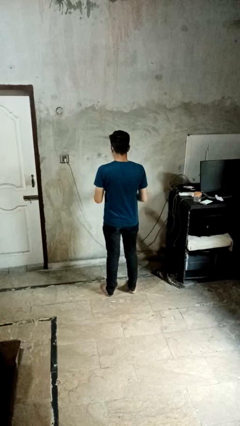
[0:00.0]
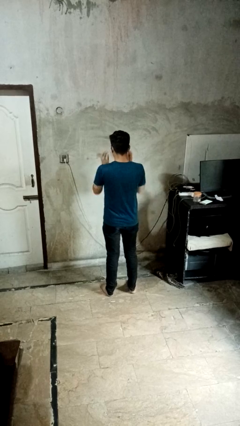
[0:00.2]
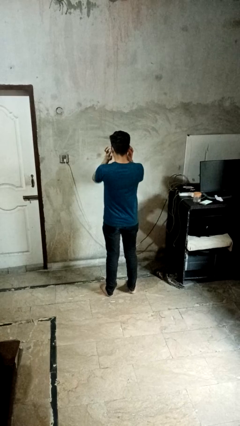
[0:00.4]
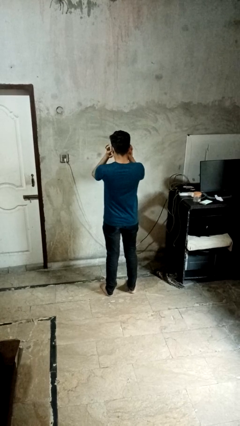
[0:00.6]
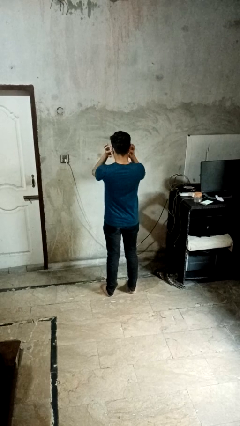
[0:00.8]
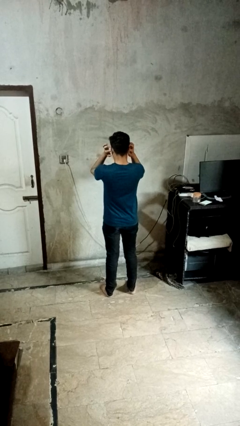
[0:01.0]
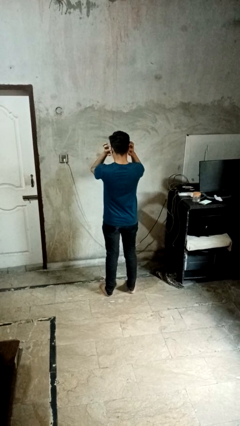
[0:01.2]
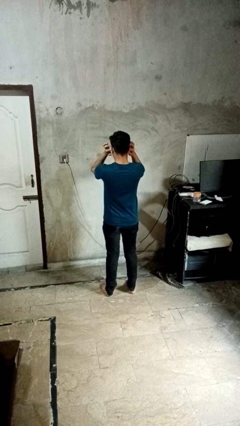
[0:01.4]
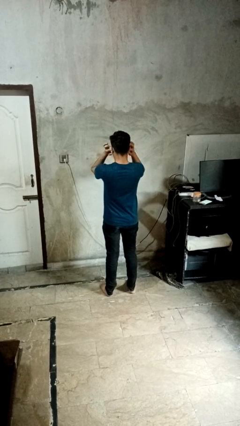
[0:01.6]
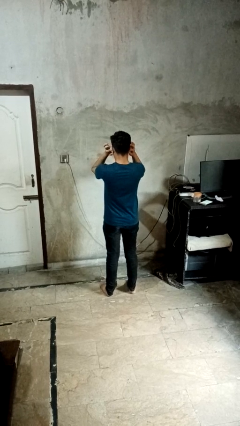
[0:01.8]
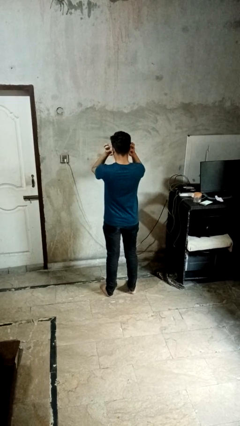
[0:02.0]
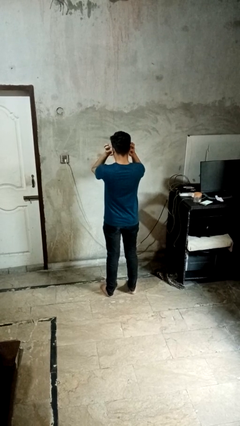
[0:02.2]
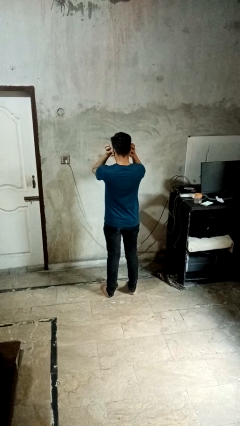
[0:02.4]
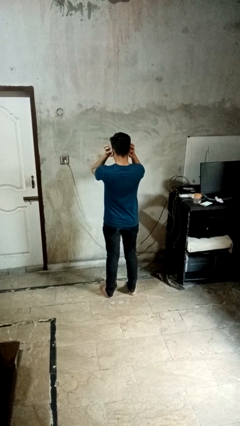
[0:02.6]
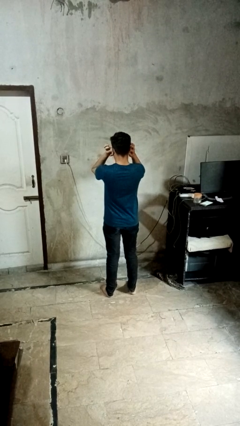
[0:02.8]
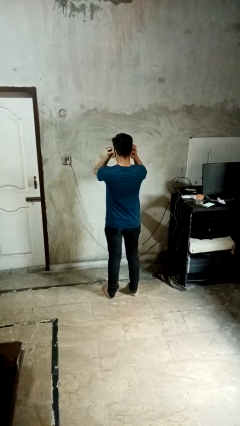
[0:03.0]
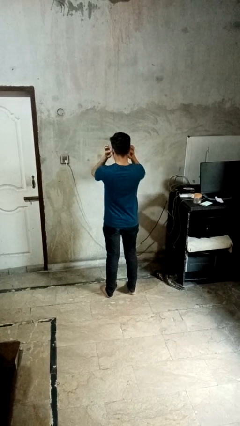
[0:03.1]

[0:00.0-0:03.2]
person puts fingers in ear

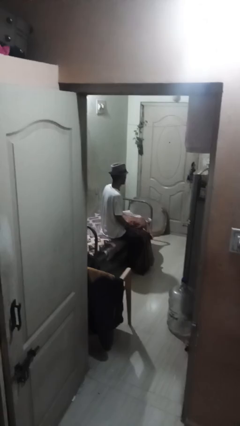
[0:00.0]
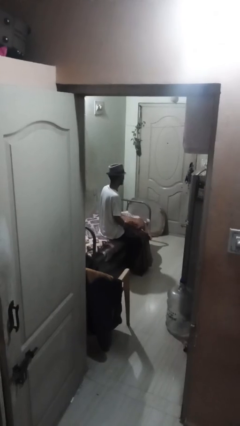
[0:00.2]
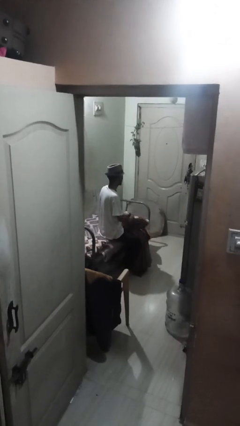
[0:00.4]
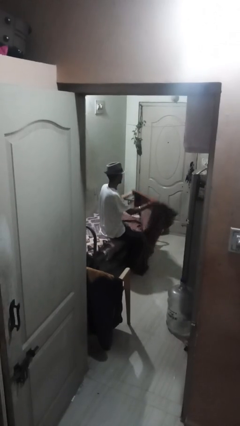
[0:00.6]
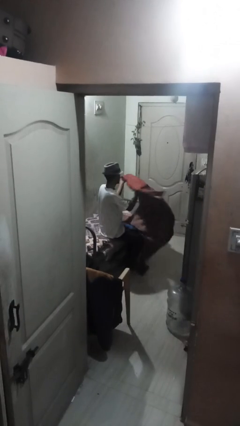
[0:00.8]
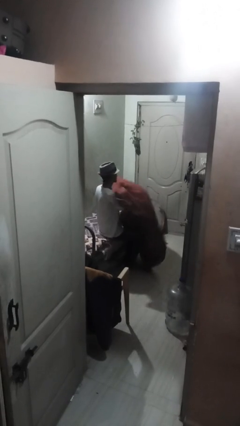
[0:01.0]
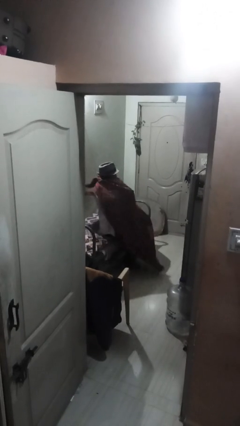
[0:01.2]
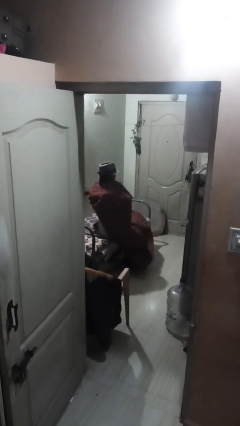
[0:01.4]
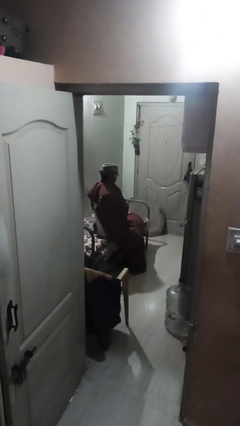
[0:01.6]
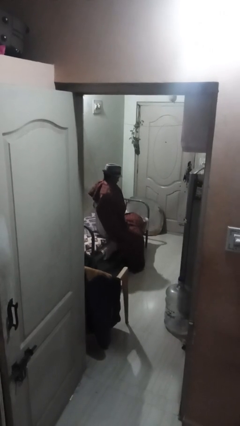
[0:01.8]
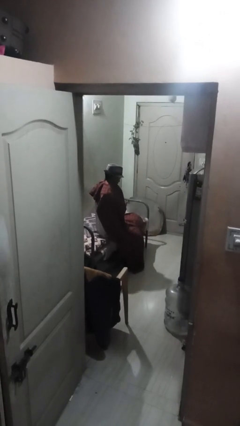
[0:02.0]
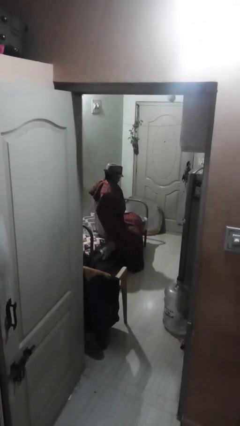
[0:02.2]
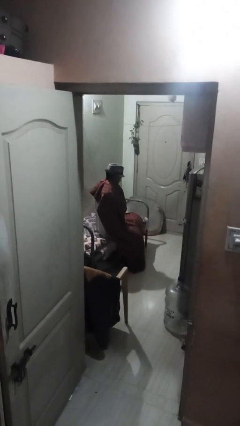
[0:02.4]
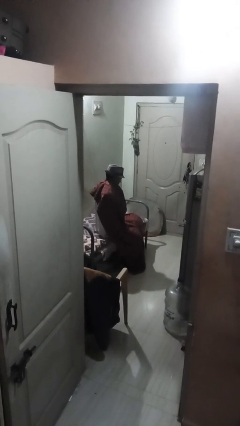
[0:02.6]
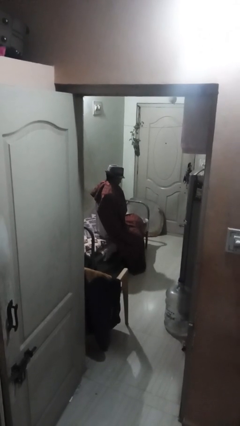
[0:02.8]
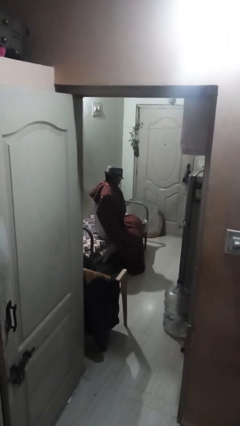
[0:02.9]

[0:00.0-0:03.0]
person covers with blanket

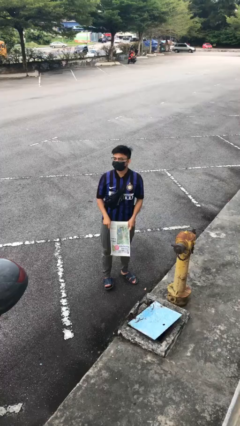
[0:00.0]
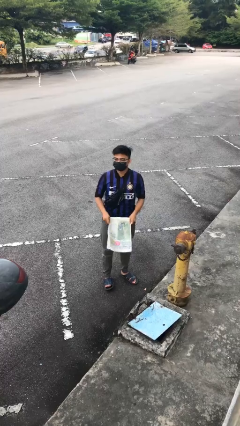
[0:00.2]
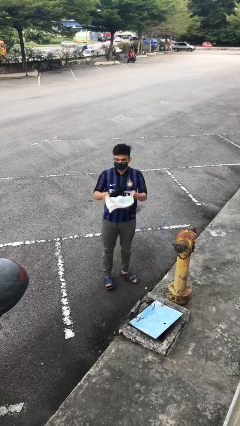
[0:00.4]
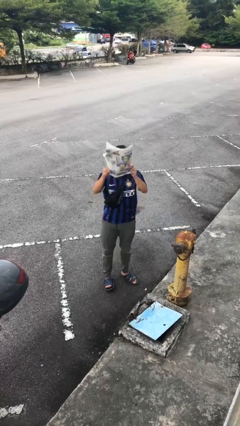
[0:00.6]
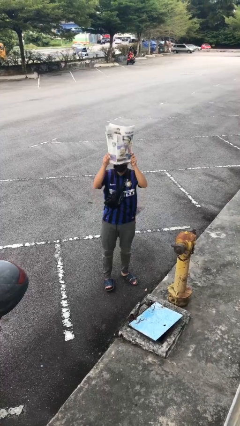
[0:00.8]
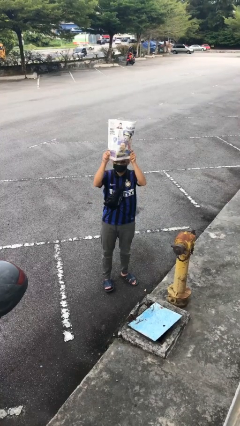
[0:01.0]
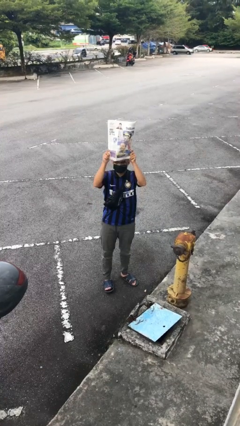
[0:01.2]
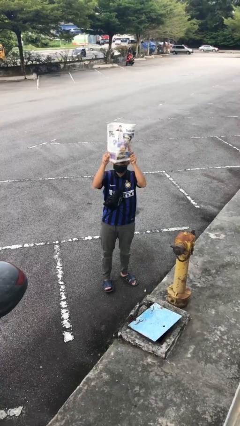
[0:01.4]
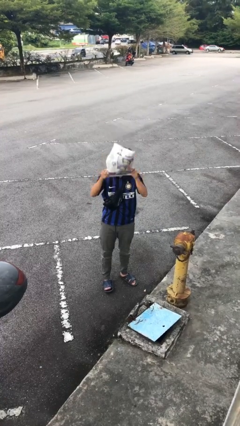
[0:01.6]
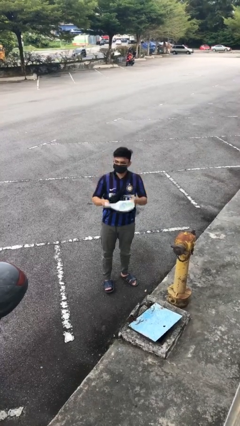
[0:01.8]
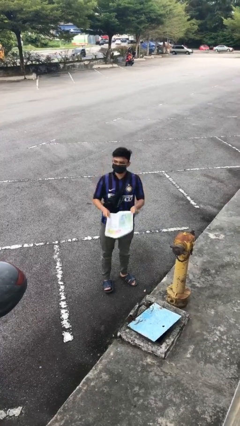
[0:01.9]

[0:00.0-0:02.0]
person holds object above head

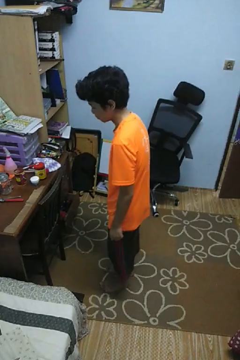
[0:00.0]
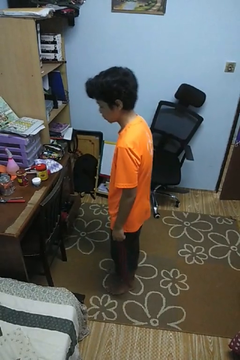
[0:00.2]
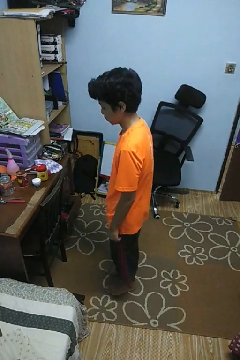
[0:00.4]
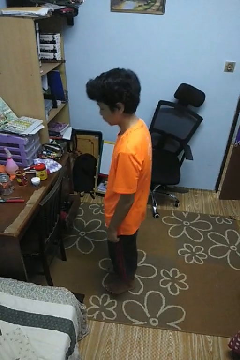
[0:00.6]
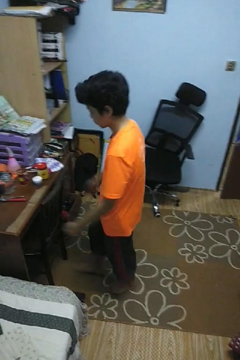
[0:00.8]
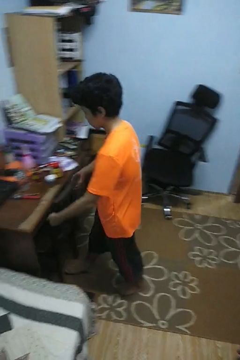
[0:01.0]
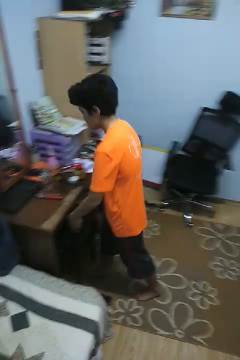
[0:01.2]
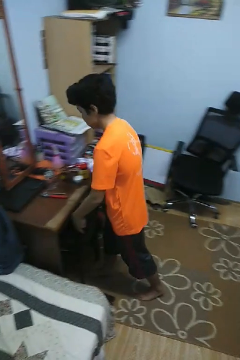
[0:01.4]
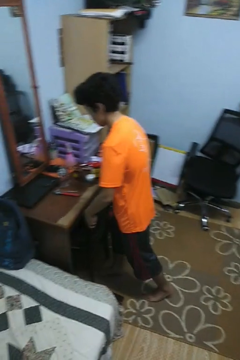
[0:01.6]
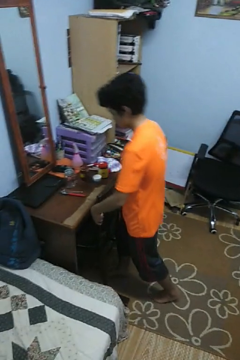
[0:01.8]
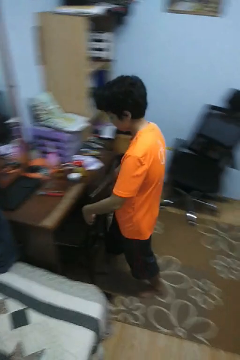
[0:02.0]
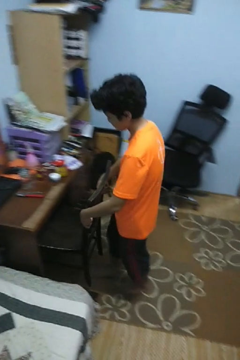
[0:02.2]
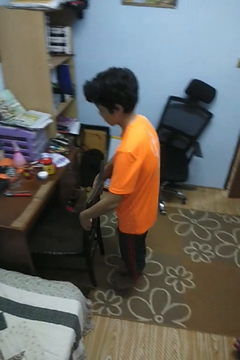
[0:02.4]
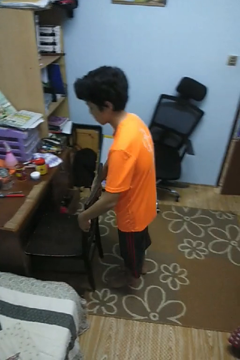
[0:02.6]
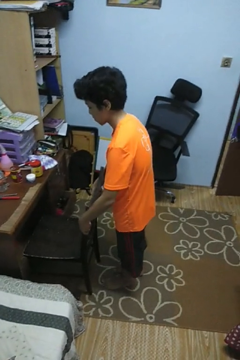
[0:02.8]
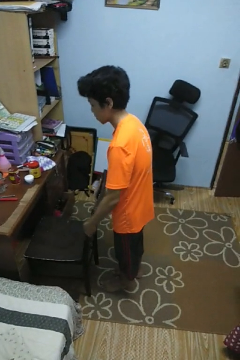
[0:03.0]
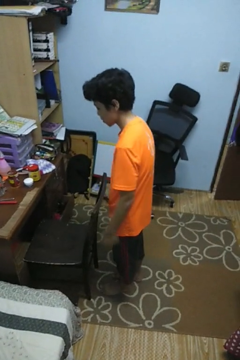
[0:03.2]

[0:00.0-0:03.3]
person pulls out chair

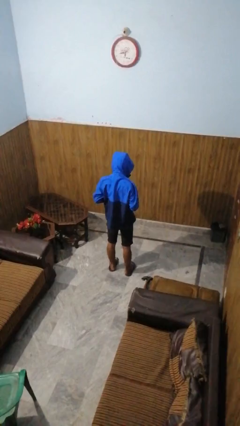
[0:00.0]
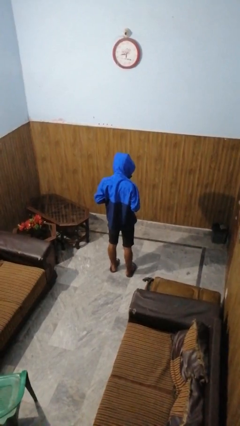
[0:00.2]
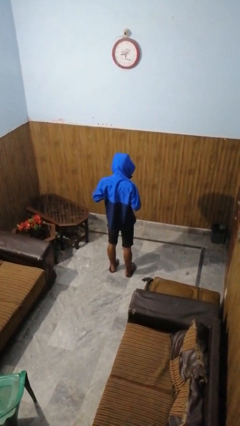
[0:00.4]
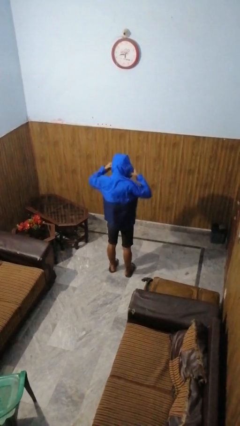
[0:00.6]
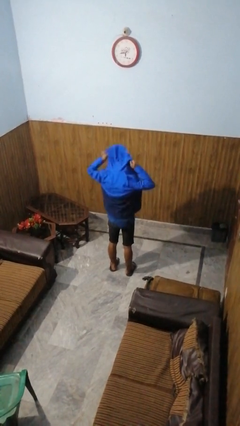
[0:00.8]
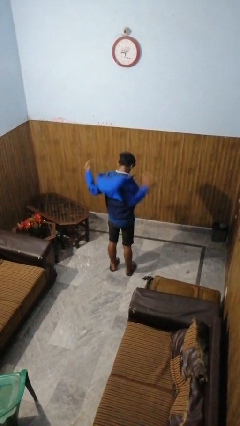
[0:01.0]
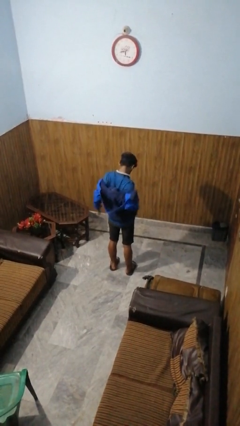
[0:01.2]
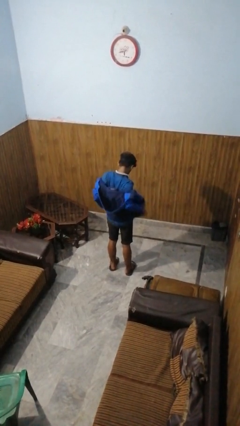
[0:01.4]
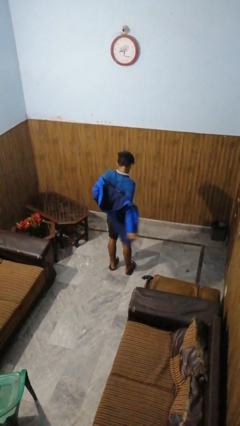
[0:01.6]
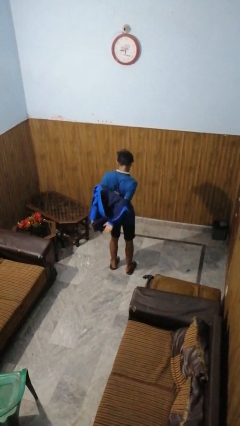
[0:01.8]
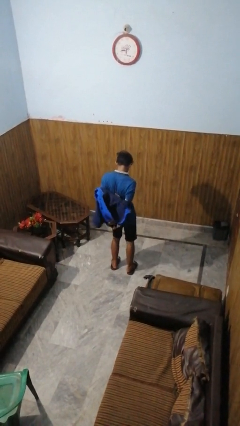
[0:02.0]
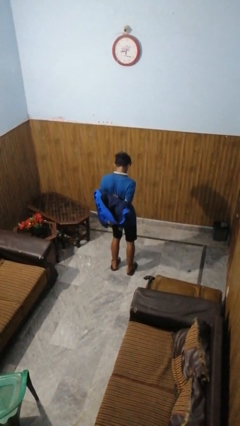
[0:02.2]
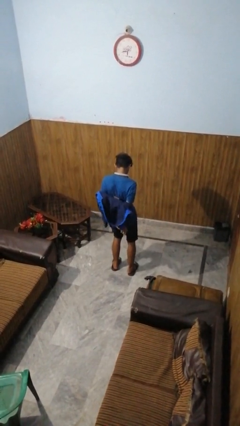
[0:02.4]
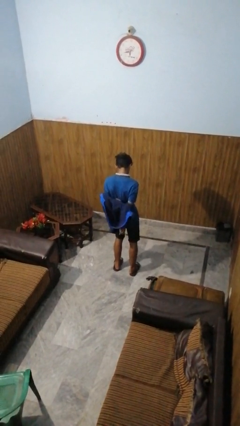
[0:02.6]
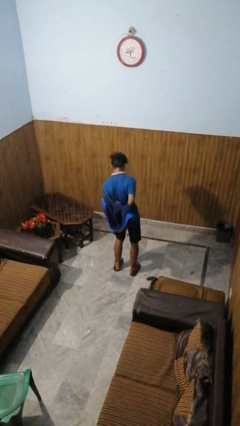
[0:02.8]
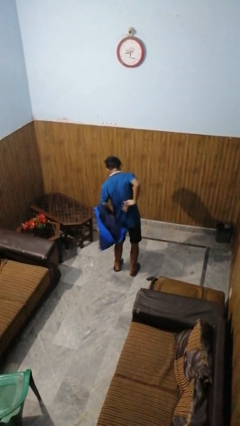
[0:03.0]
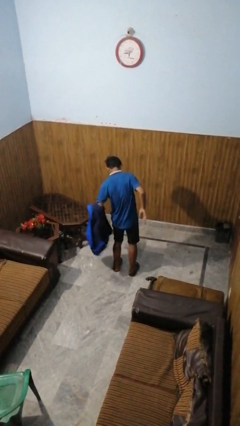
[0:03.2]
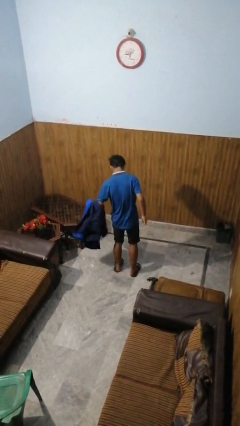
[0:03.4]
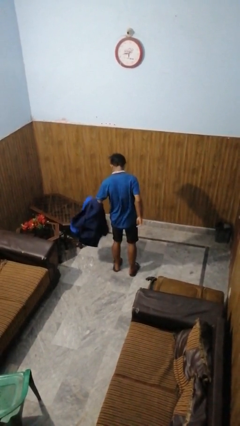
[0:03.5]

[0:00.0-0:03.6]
person takes off hoodie

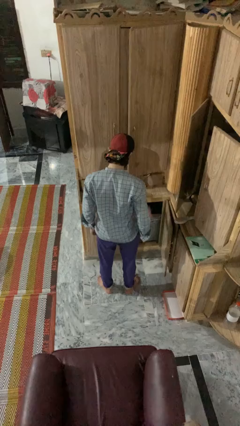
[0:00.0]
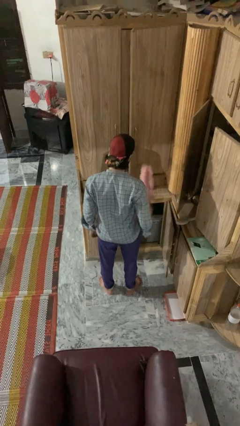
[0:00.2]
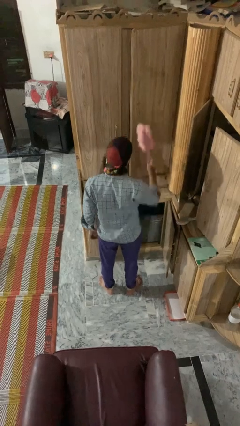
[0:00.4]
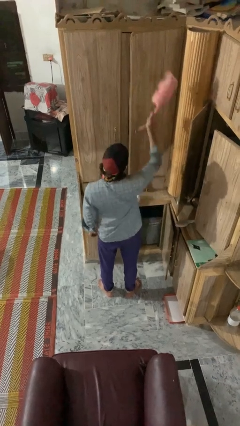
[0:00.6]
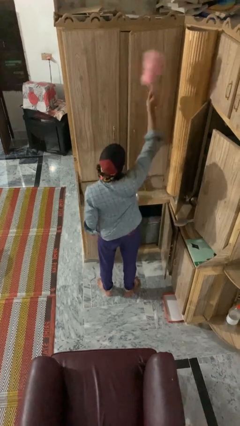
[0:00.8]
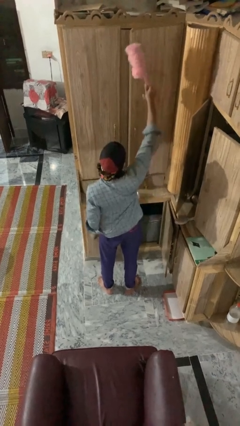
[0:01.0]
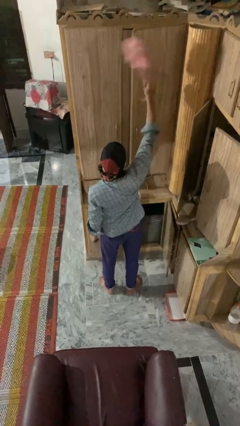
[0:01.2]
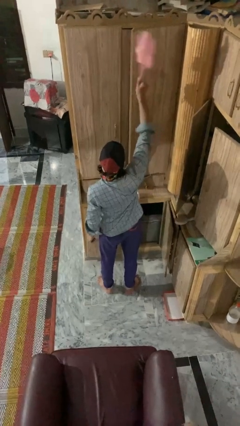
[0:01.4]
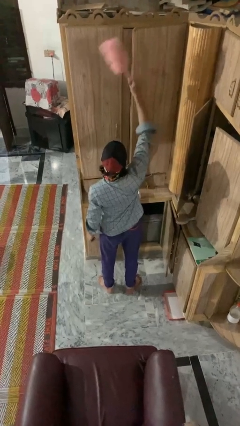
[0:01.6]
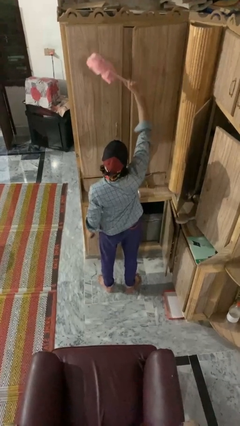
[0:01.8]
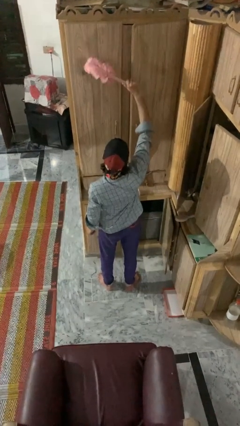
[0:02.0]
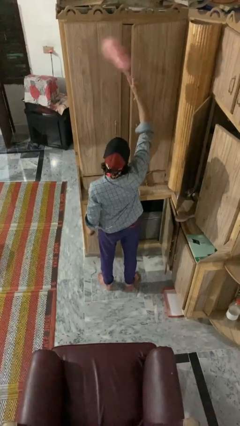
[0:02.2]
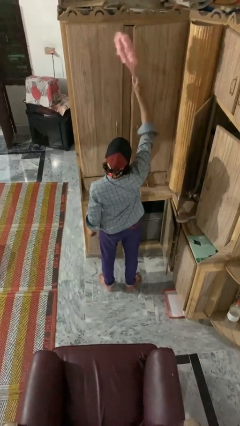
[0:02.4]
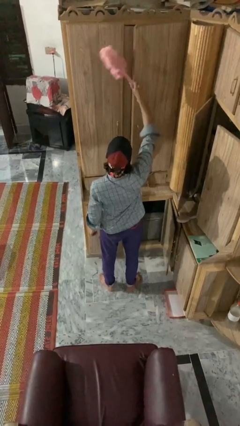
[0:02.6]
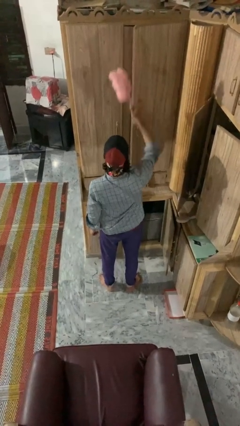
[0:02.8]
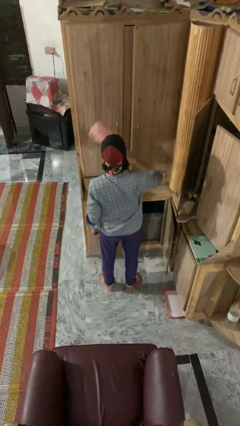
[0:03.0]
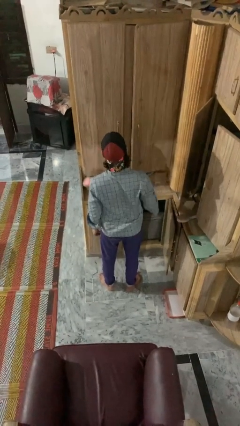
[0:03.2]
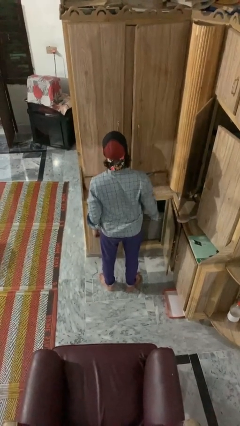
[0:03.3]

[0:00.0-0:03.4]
person dusts furniture
